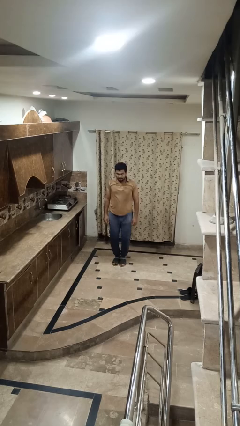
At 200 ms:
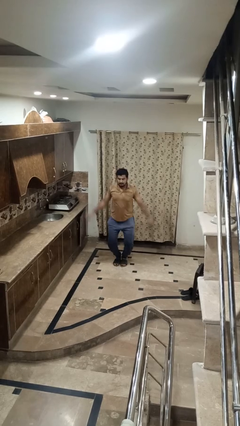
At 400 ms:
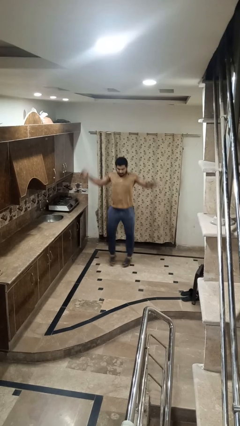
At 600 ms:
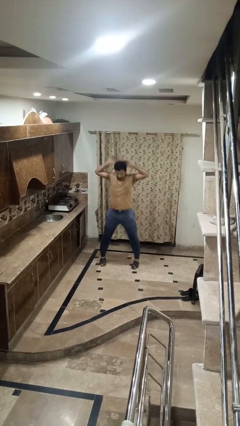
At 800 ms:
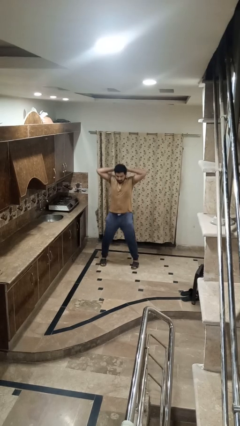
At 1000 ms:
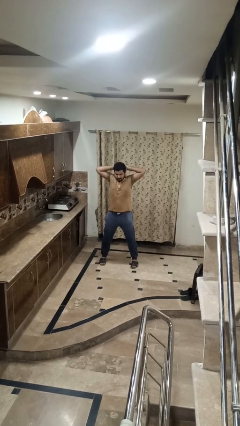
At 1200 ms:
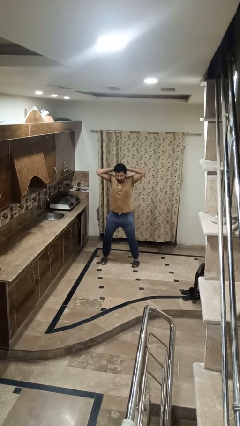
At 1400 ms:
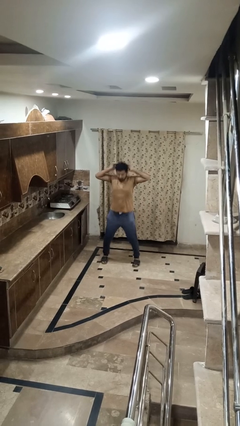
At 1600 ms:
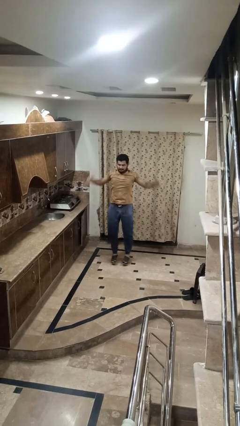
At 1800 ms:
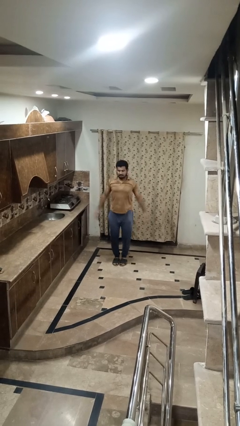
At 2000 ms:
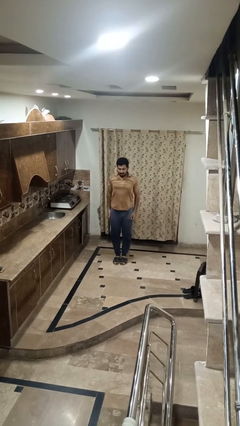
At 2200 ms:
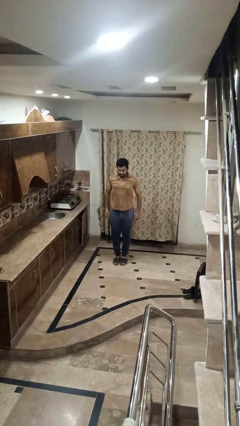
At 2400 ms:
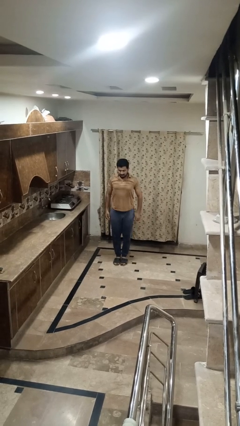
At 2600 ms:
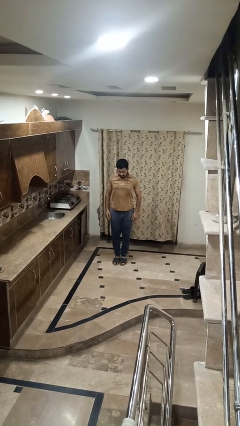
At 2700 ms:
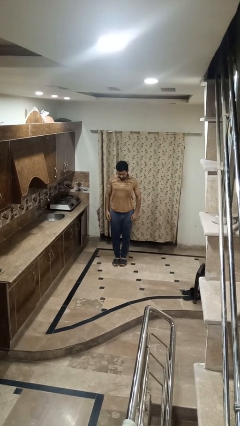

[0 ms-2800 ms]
person exercises with jumping jacks

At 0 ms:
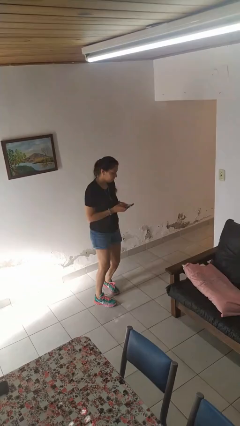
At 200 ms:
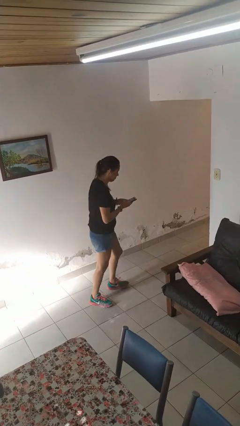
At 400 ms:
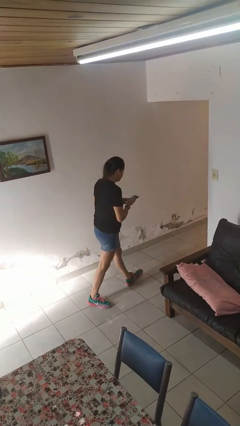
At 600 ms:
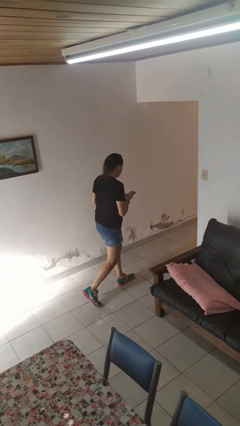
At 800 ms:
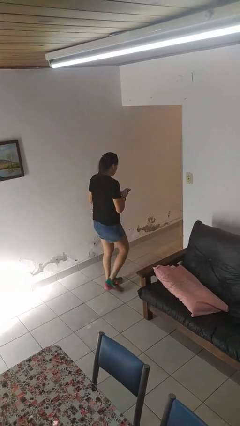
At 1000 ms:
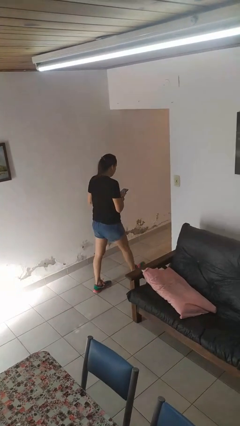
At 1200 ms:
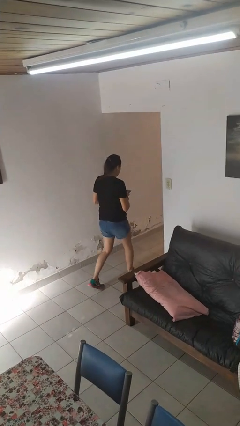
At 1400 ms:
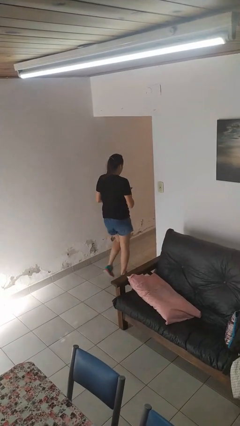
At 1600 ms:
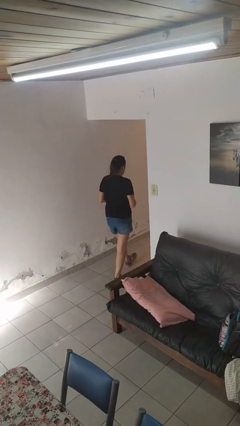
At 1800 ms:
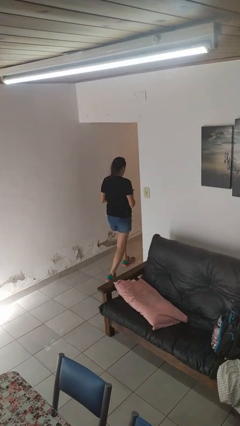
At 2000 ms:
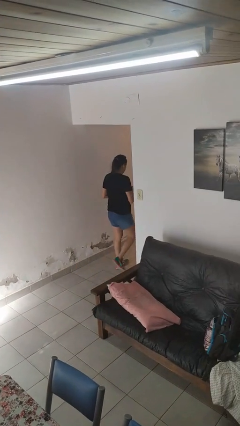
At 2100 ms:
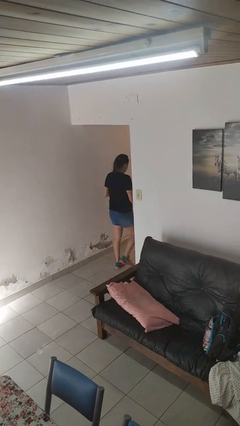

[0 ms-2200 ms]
person exits scene through structure

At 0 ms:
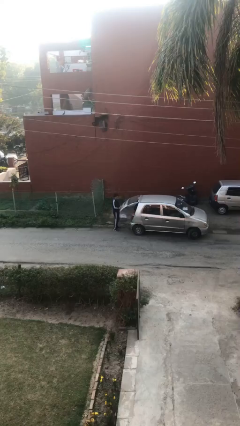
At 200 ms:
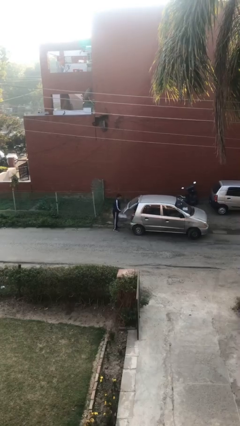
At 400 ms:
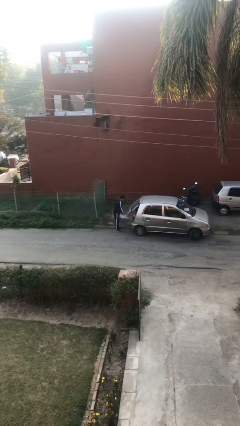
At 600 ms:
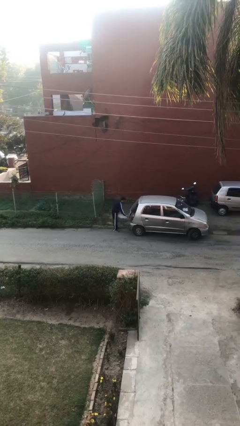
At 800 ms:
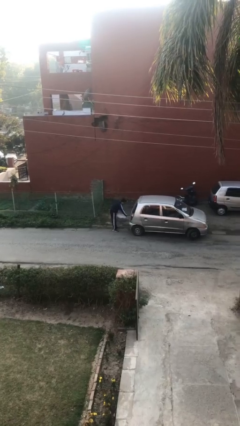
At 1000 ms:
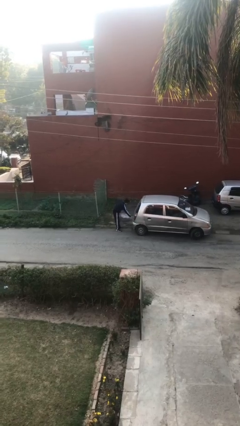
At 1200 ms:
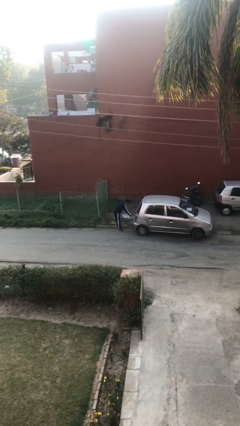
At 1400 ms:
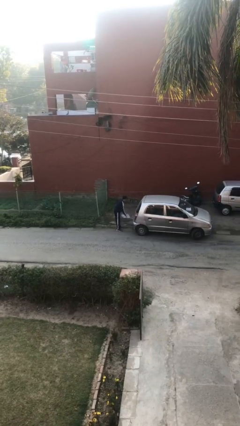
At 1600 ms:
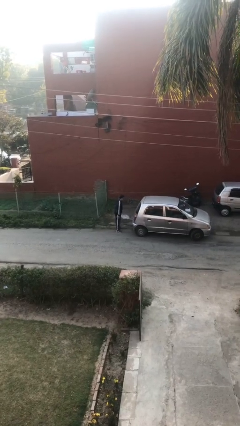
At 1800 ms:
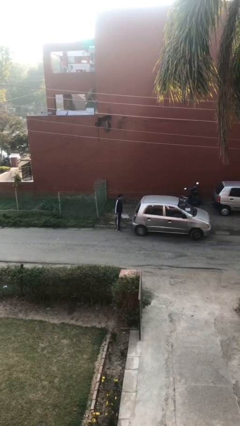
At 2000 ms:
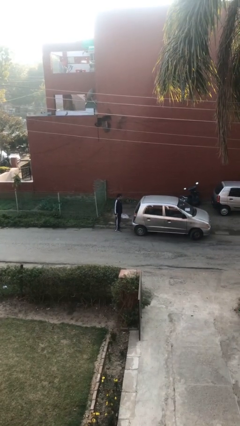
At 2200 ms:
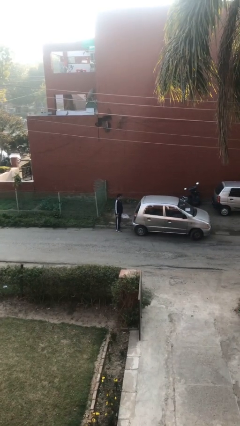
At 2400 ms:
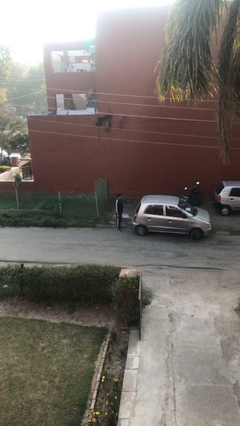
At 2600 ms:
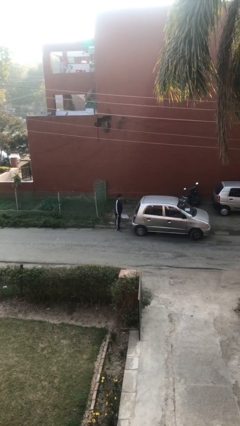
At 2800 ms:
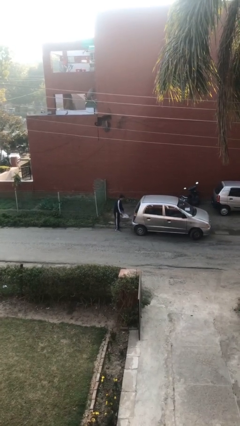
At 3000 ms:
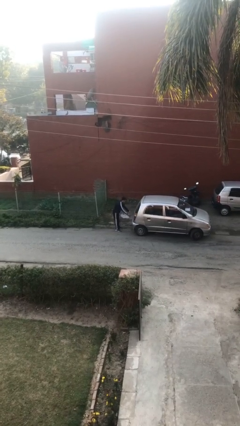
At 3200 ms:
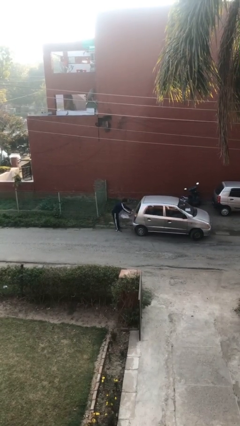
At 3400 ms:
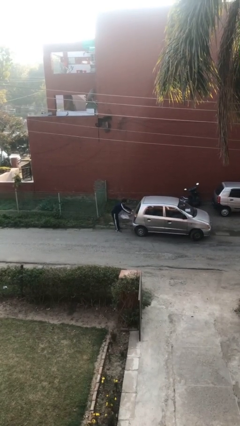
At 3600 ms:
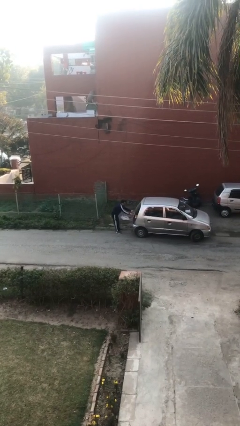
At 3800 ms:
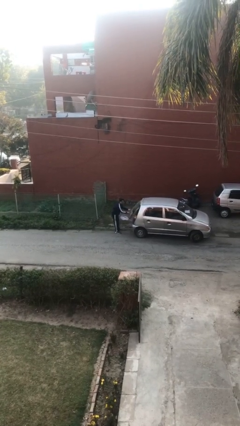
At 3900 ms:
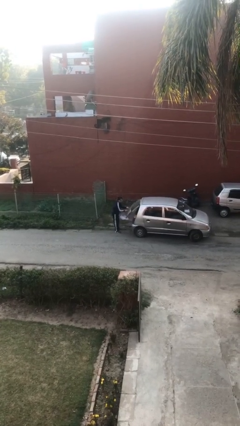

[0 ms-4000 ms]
person closes car trunk

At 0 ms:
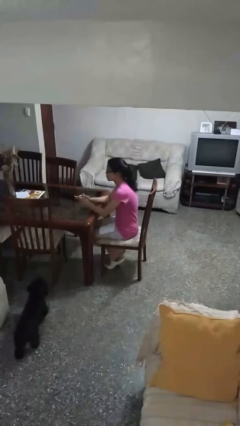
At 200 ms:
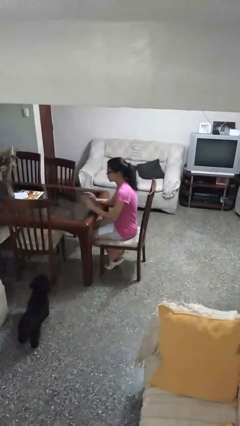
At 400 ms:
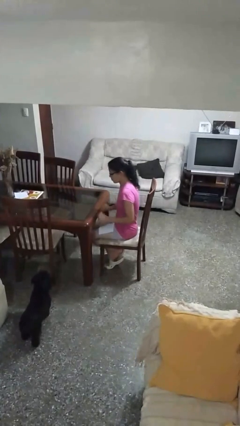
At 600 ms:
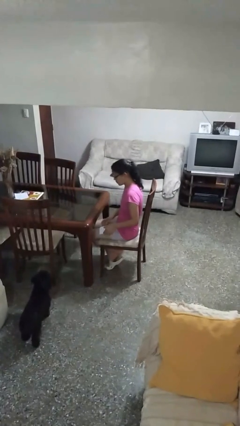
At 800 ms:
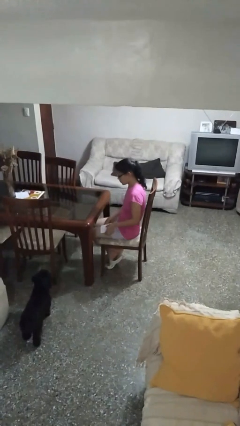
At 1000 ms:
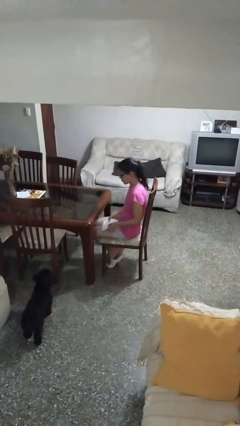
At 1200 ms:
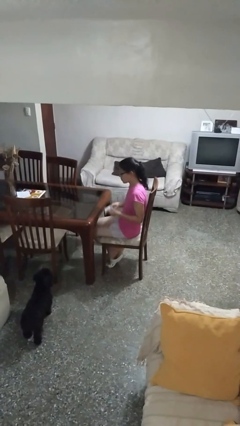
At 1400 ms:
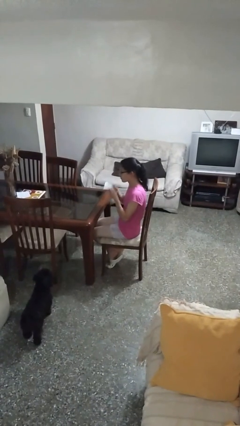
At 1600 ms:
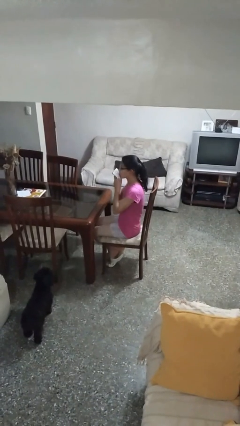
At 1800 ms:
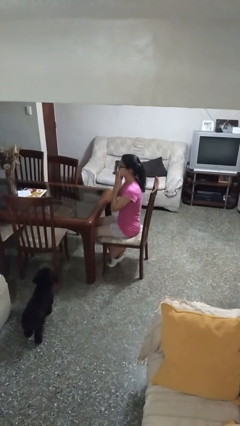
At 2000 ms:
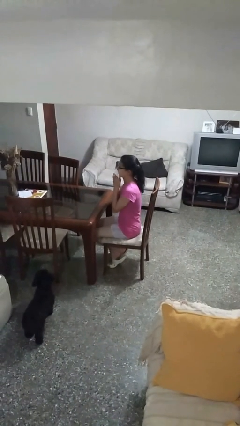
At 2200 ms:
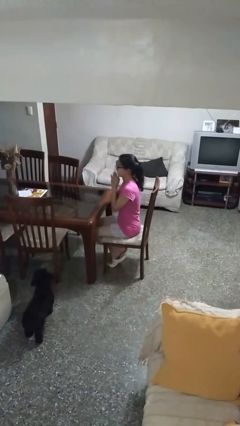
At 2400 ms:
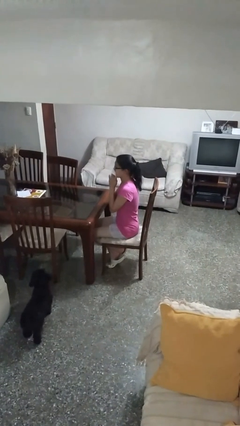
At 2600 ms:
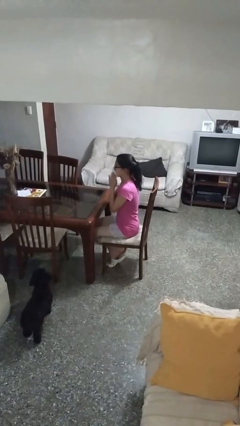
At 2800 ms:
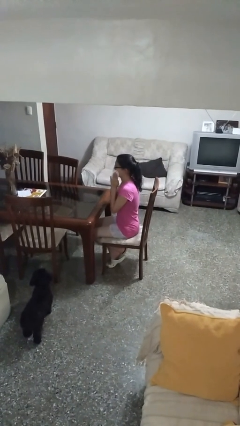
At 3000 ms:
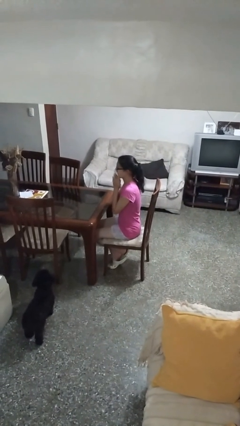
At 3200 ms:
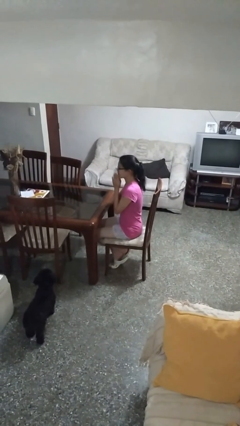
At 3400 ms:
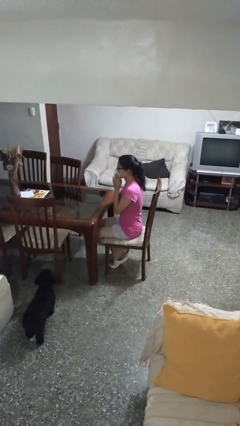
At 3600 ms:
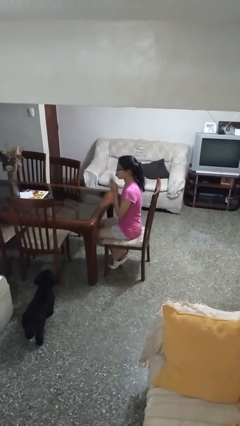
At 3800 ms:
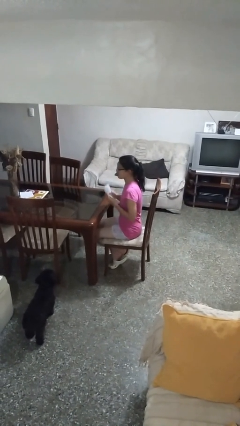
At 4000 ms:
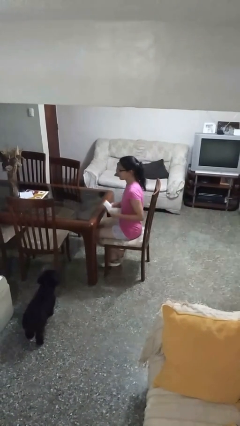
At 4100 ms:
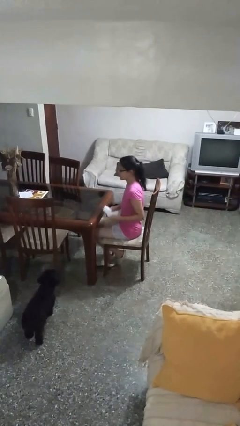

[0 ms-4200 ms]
person wipes mouth with napkin

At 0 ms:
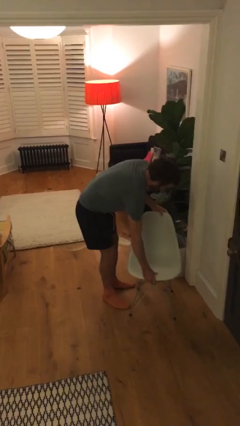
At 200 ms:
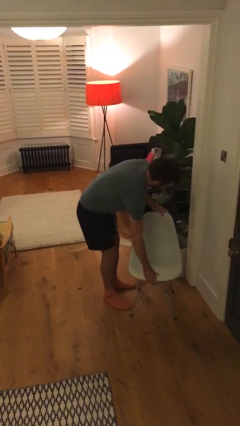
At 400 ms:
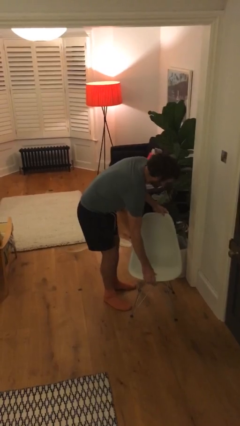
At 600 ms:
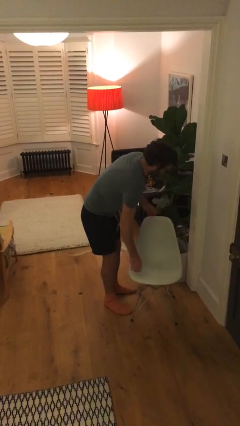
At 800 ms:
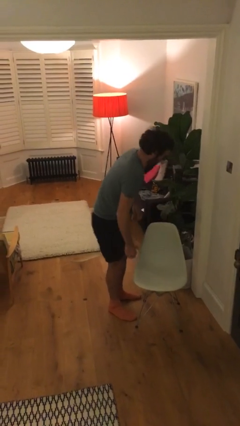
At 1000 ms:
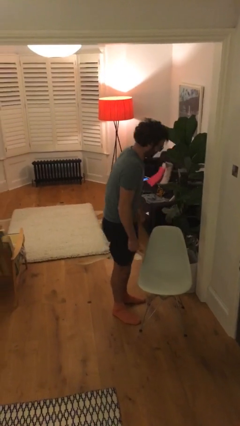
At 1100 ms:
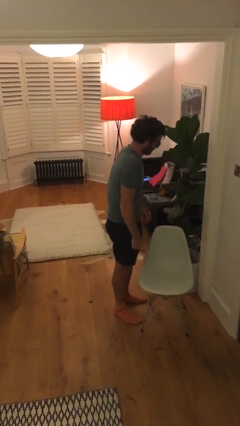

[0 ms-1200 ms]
person puts down object on floor

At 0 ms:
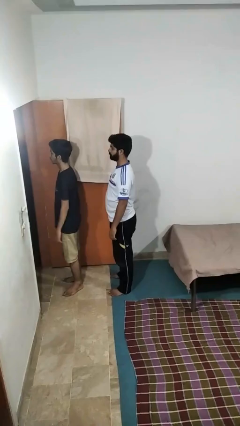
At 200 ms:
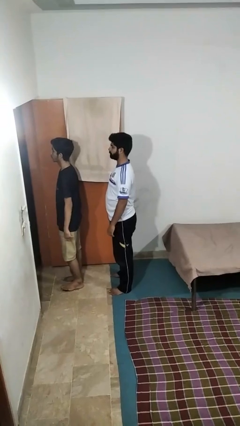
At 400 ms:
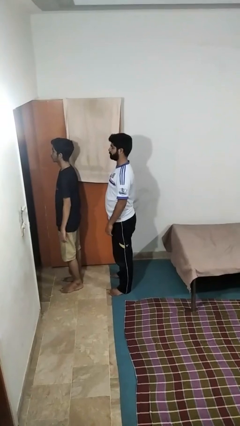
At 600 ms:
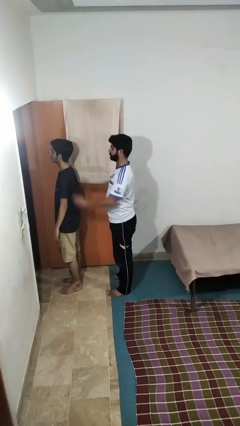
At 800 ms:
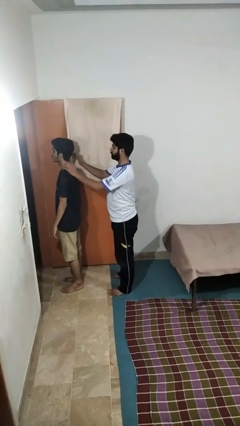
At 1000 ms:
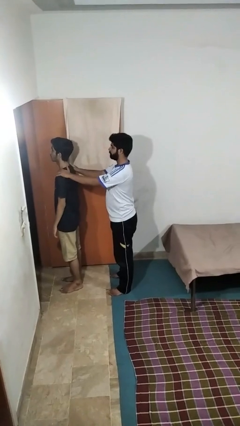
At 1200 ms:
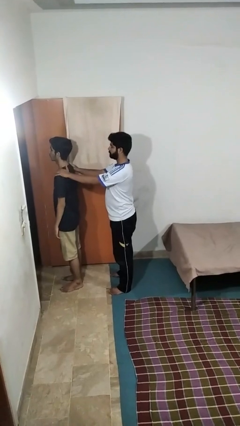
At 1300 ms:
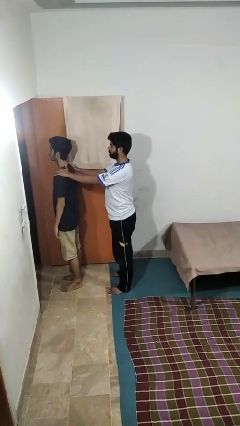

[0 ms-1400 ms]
person grabs person by shoulder

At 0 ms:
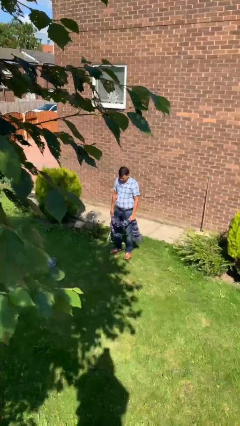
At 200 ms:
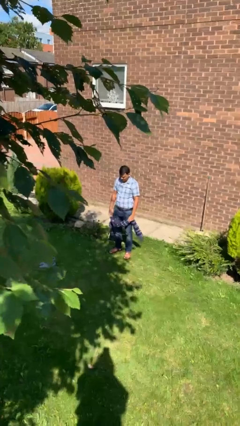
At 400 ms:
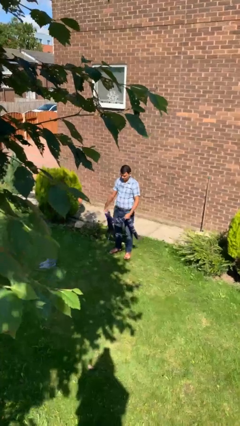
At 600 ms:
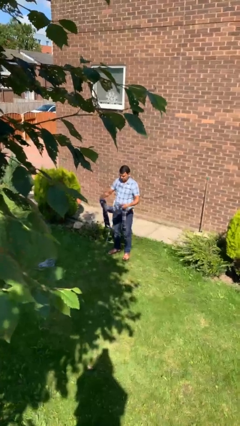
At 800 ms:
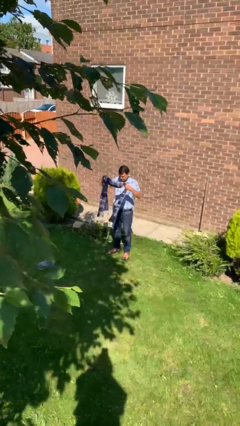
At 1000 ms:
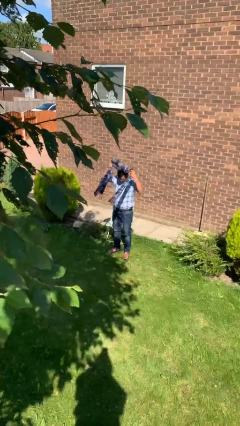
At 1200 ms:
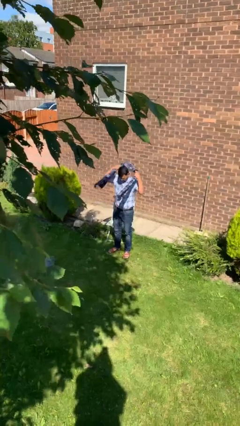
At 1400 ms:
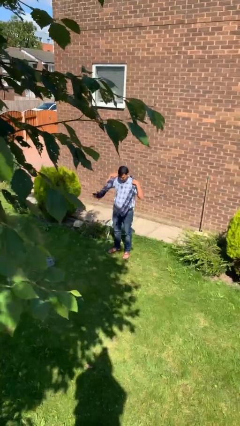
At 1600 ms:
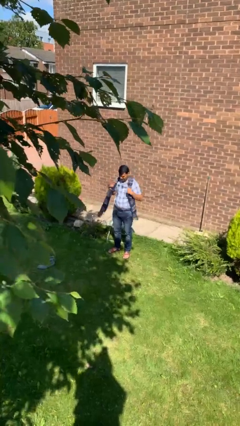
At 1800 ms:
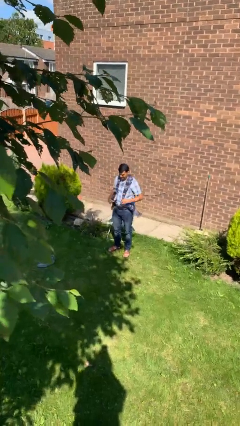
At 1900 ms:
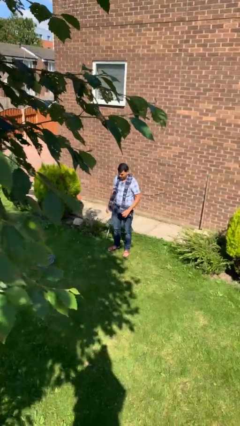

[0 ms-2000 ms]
person puts on scarf
